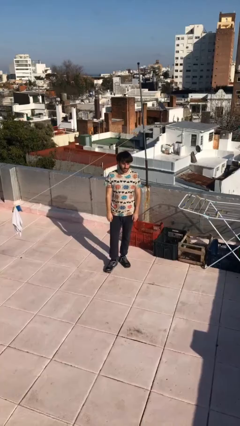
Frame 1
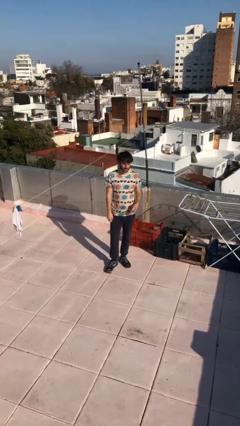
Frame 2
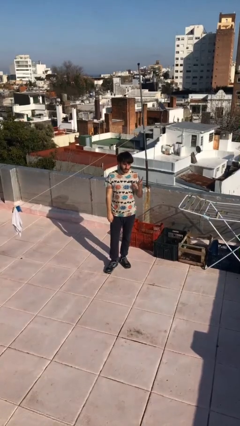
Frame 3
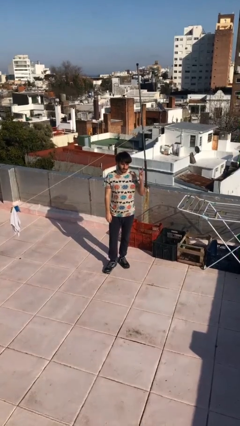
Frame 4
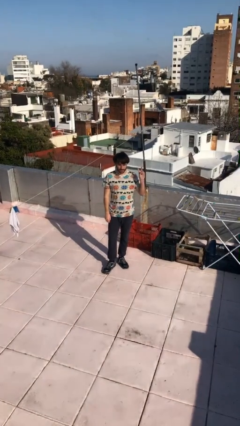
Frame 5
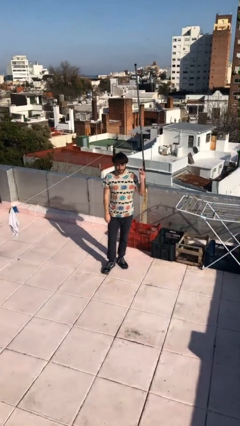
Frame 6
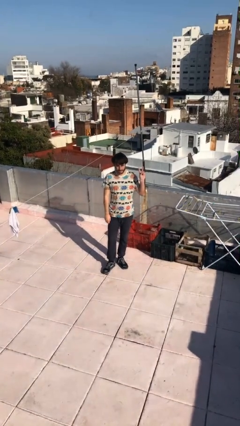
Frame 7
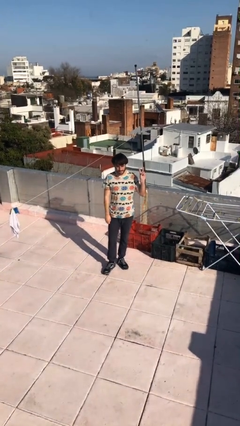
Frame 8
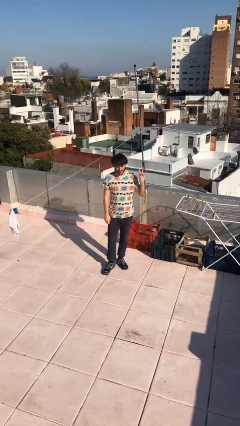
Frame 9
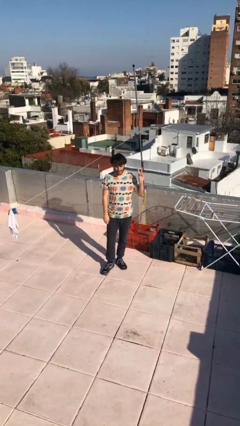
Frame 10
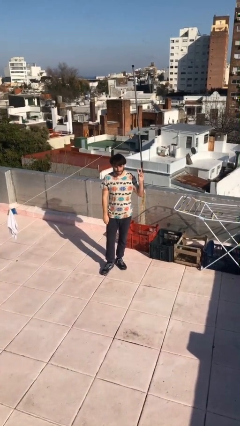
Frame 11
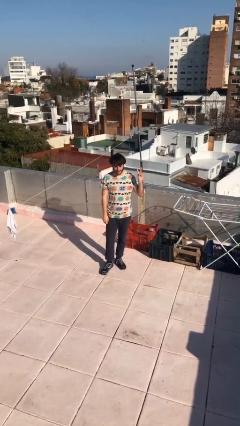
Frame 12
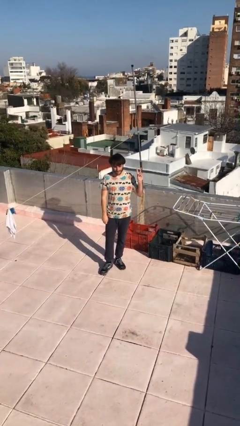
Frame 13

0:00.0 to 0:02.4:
person gestures peace

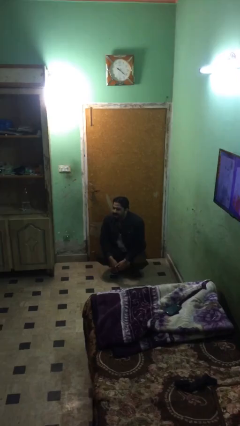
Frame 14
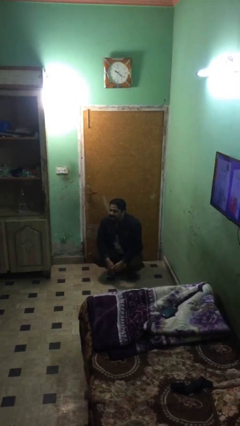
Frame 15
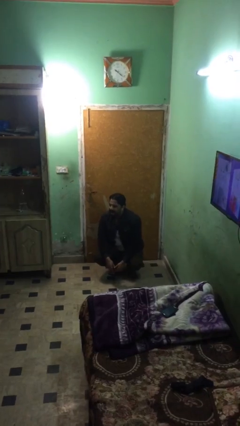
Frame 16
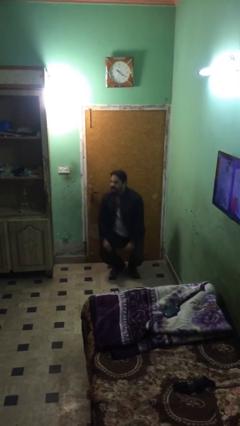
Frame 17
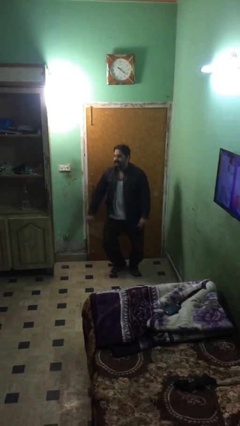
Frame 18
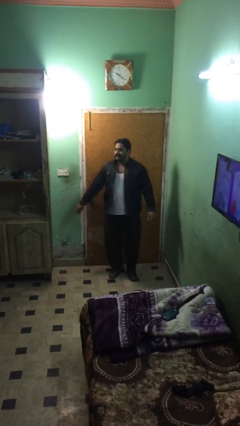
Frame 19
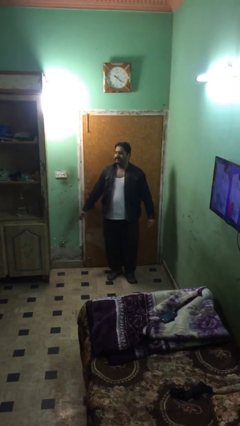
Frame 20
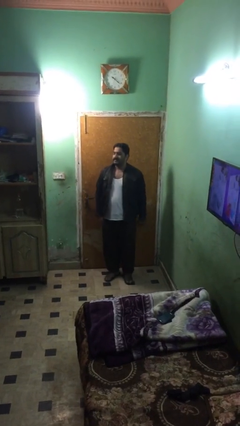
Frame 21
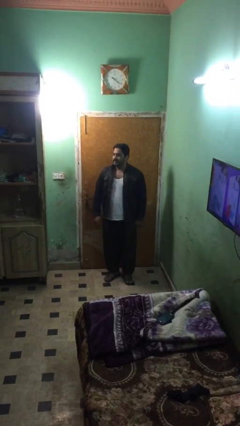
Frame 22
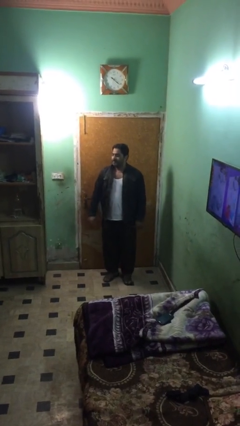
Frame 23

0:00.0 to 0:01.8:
person stands up

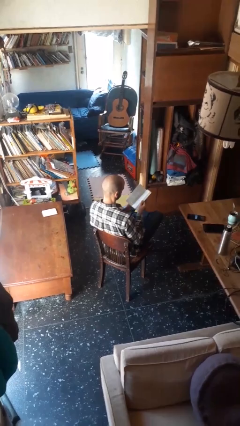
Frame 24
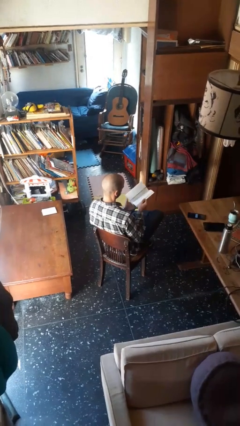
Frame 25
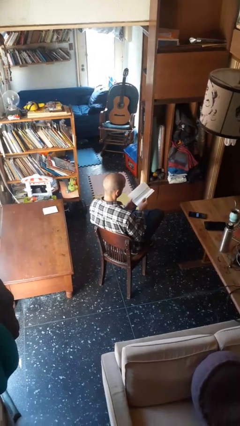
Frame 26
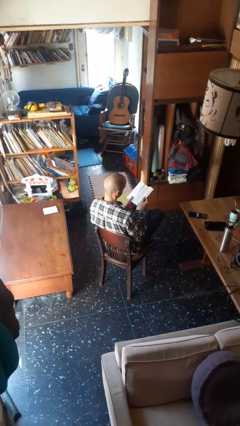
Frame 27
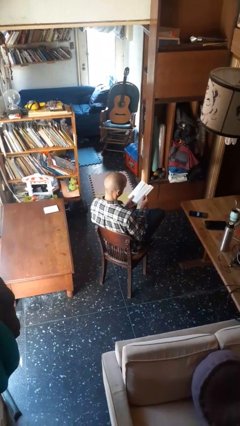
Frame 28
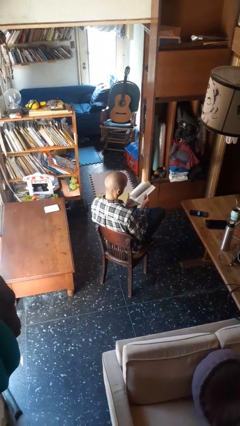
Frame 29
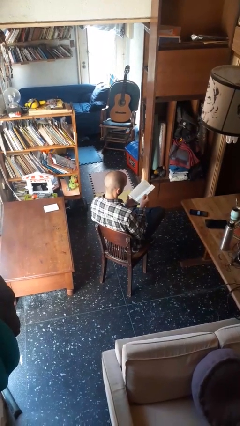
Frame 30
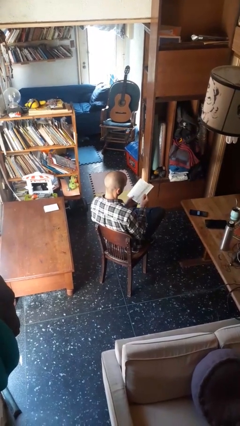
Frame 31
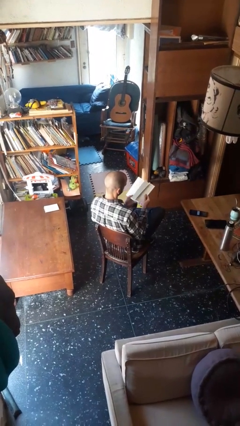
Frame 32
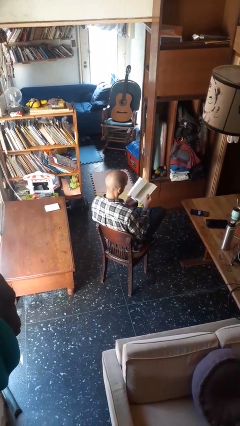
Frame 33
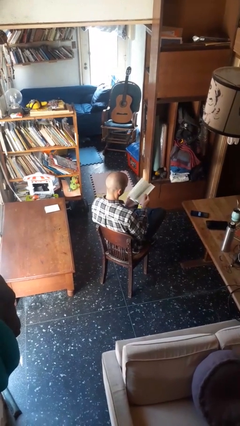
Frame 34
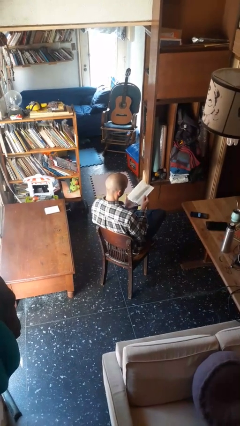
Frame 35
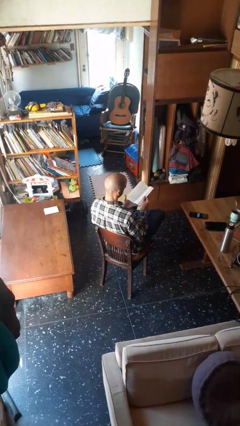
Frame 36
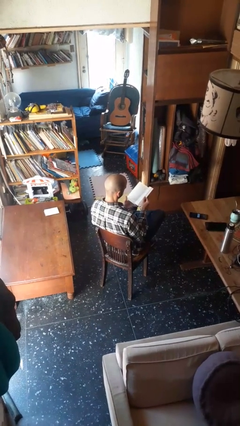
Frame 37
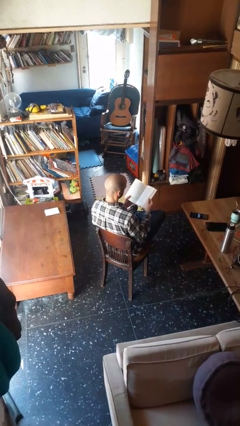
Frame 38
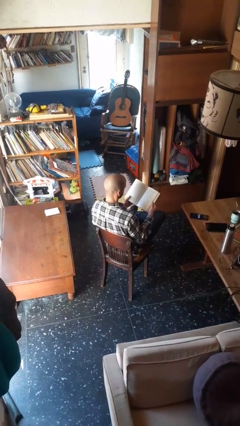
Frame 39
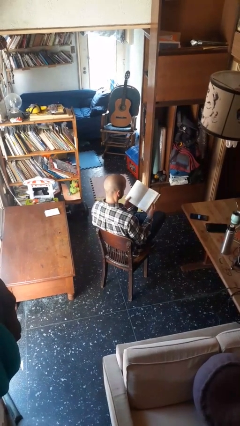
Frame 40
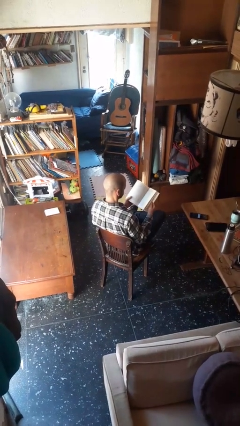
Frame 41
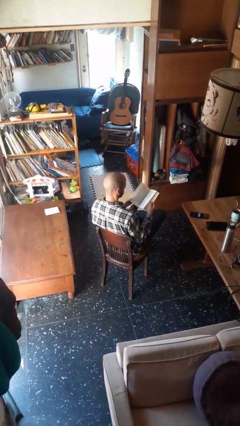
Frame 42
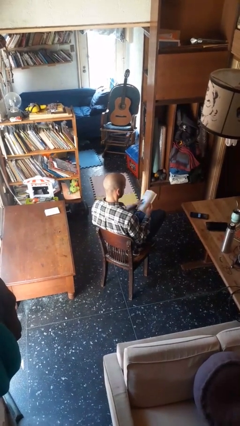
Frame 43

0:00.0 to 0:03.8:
person reads book

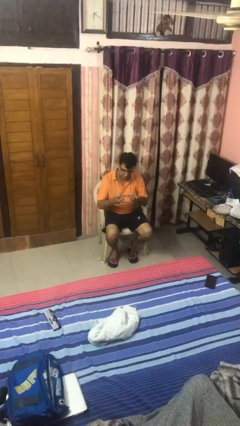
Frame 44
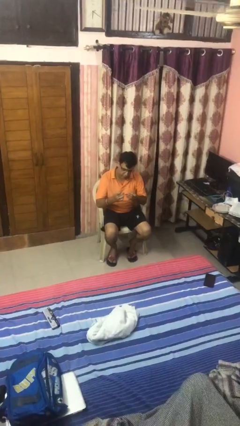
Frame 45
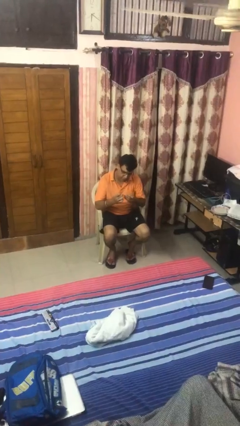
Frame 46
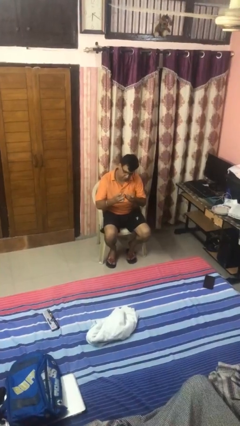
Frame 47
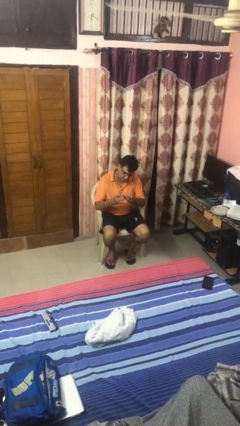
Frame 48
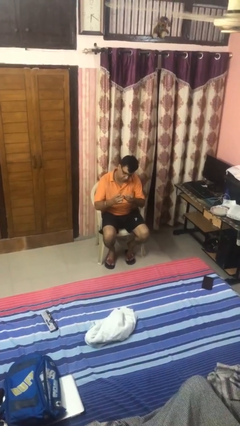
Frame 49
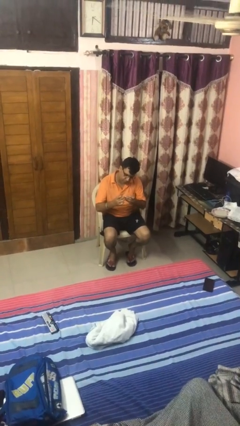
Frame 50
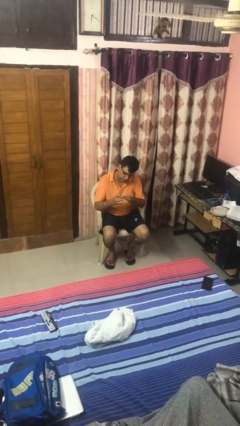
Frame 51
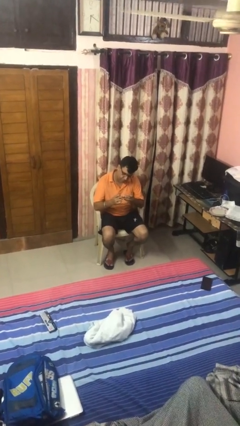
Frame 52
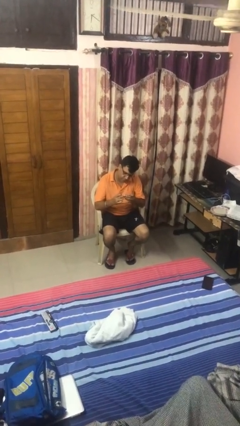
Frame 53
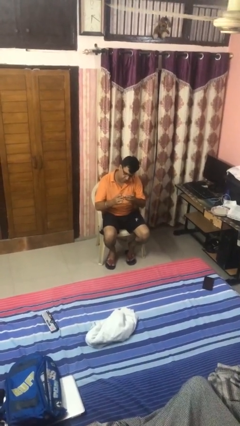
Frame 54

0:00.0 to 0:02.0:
person clips fingernails

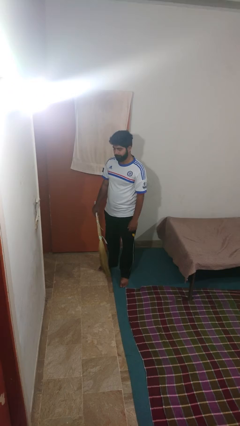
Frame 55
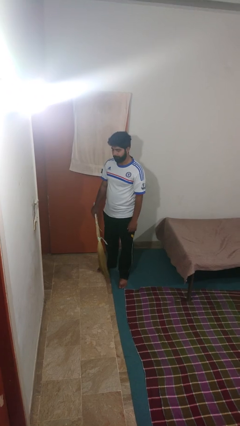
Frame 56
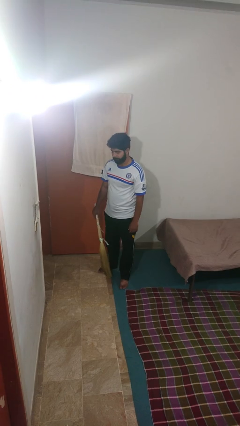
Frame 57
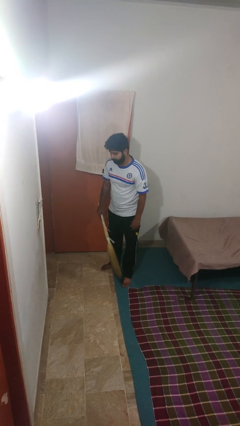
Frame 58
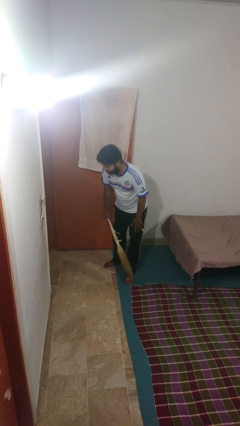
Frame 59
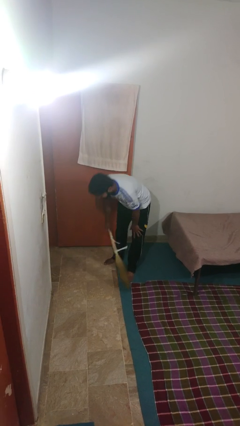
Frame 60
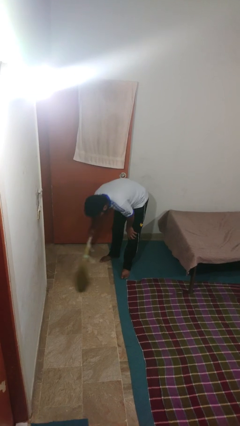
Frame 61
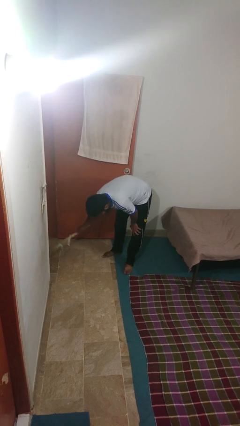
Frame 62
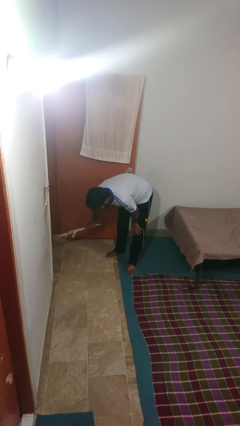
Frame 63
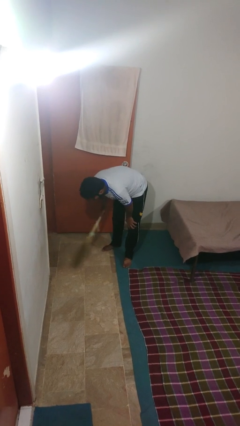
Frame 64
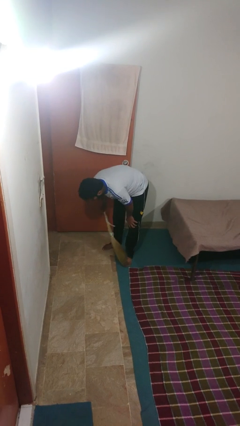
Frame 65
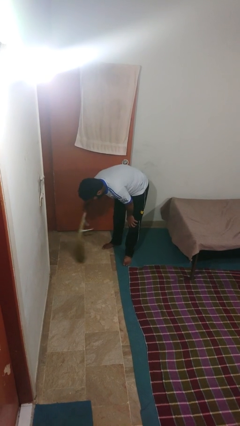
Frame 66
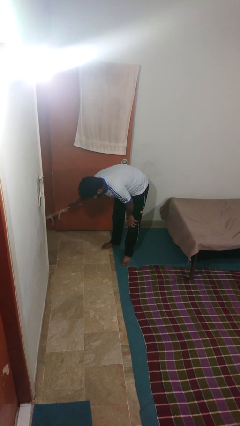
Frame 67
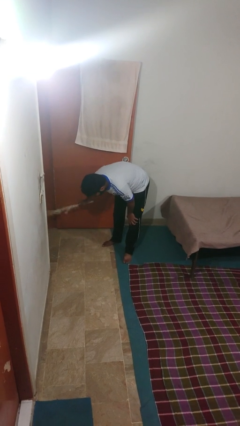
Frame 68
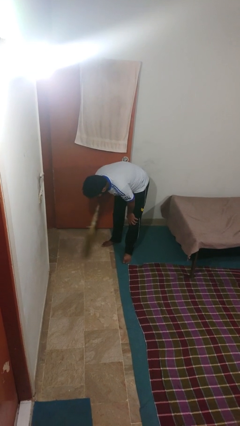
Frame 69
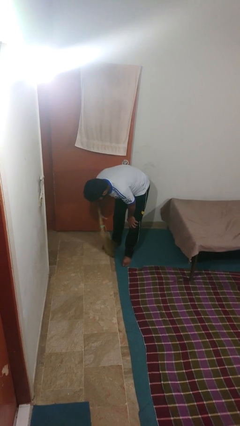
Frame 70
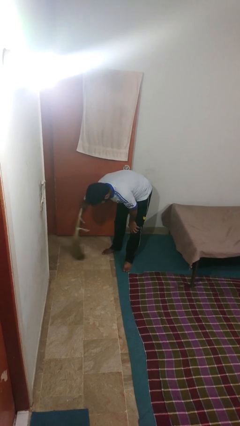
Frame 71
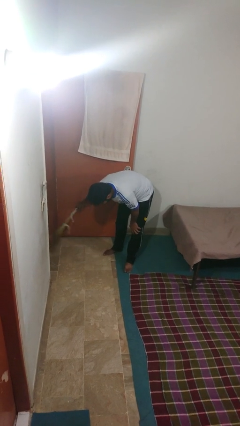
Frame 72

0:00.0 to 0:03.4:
person sweeps floor

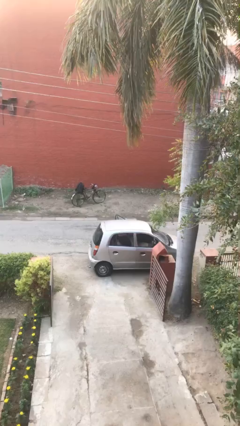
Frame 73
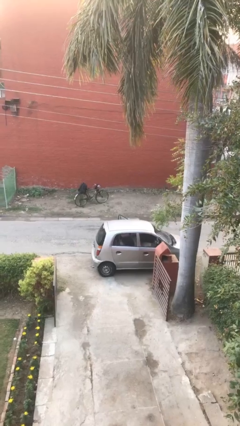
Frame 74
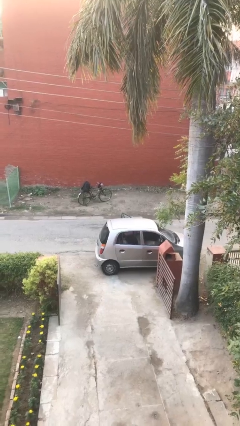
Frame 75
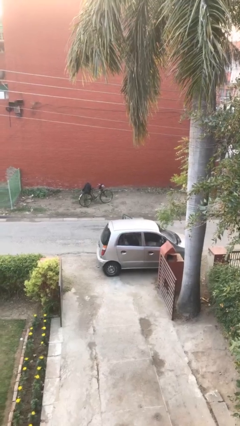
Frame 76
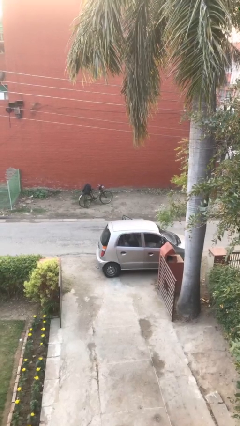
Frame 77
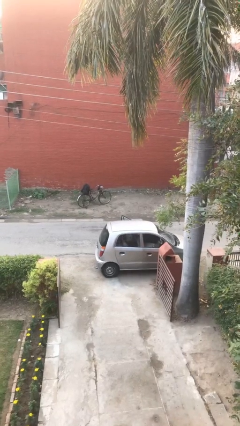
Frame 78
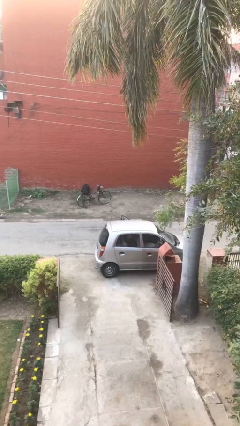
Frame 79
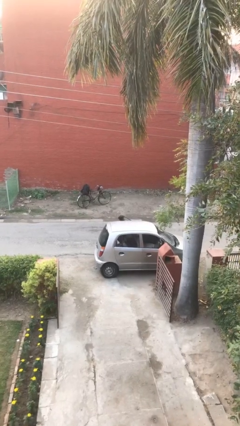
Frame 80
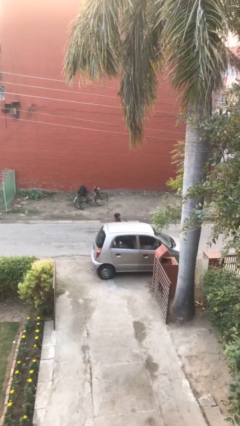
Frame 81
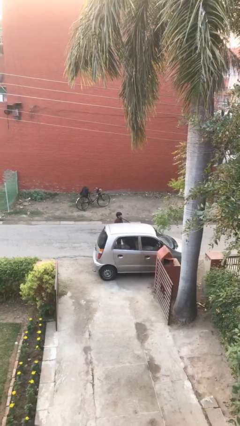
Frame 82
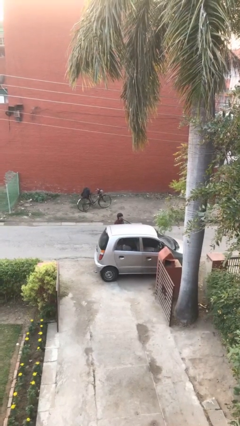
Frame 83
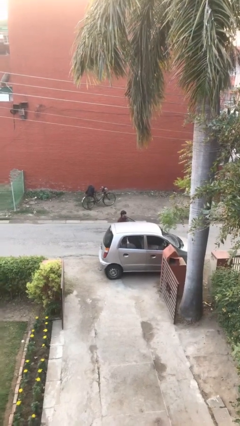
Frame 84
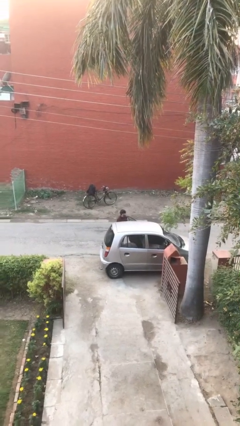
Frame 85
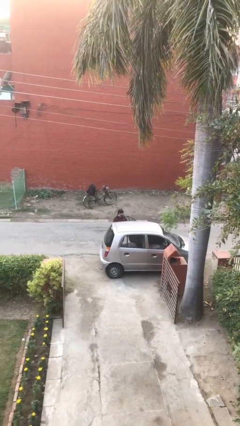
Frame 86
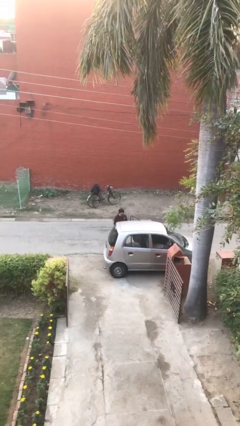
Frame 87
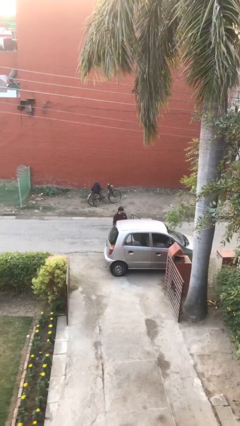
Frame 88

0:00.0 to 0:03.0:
person exits car

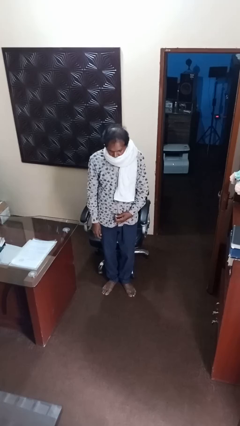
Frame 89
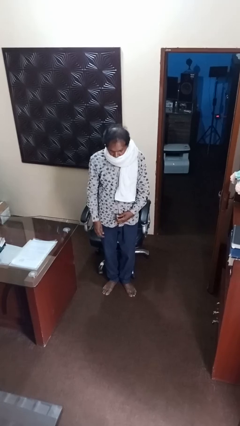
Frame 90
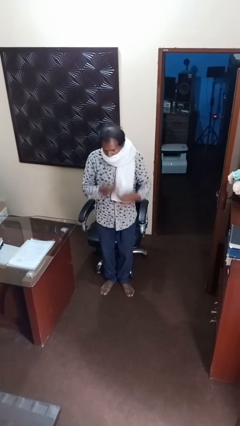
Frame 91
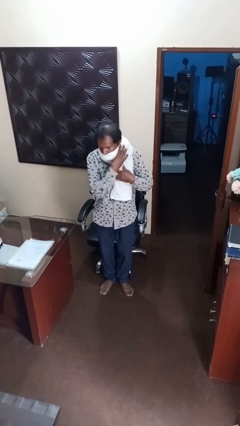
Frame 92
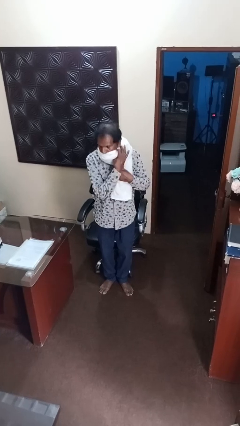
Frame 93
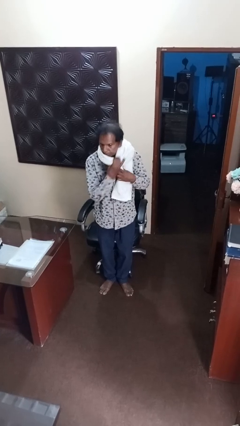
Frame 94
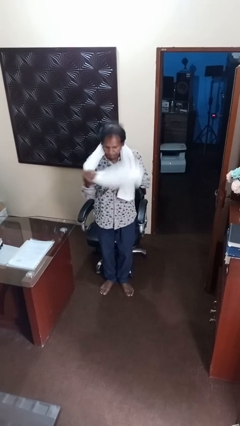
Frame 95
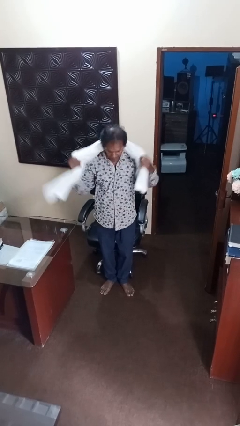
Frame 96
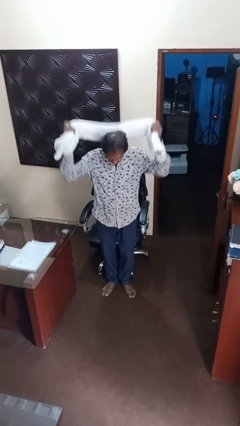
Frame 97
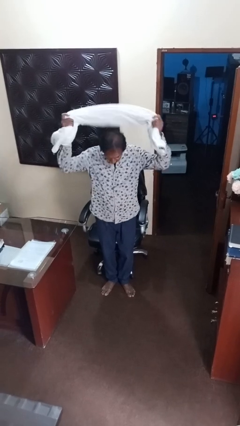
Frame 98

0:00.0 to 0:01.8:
person takes off scarf
